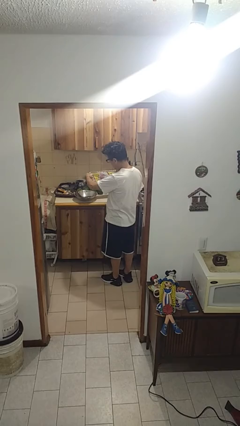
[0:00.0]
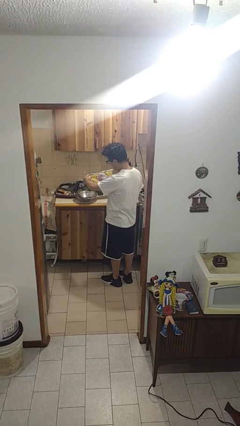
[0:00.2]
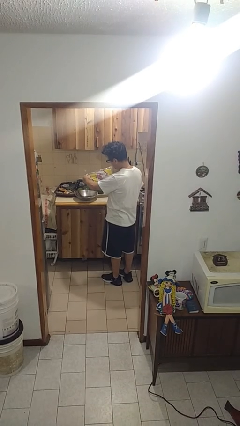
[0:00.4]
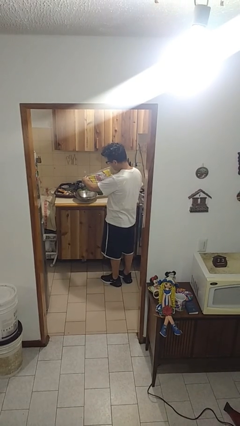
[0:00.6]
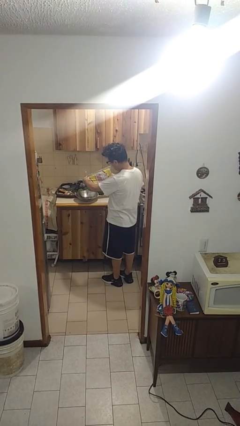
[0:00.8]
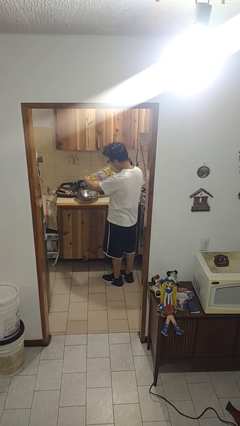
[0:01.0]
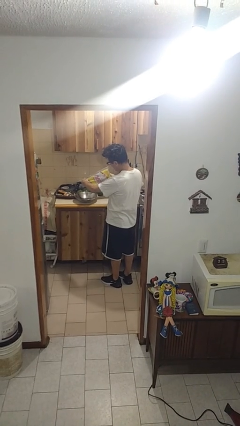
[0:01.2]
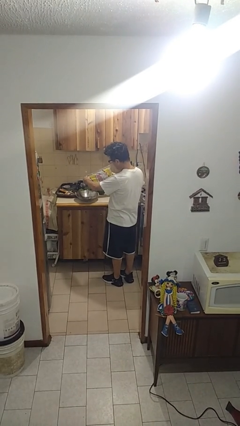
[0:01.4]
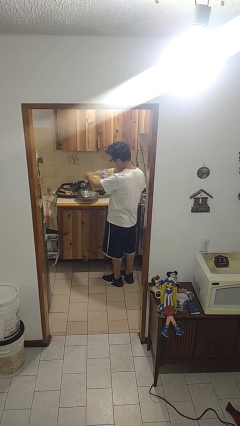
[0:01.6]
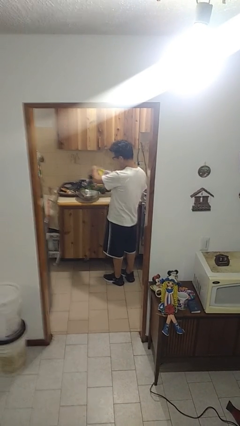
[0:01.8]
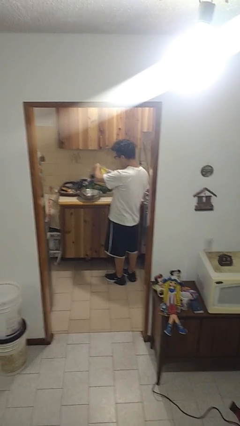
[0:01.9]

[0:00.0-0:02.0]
person pours into bowl

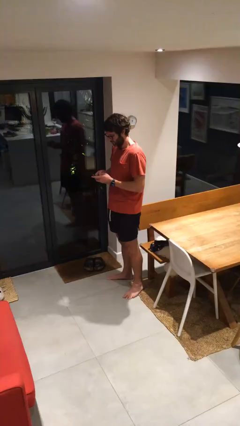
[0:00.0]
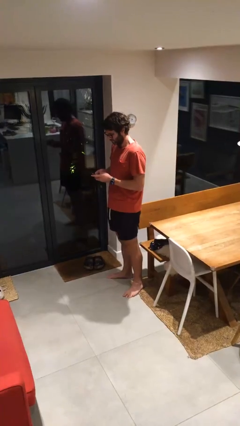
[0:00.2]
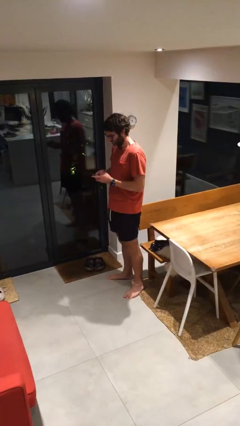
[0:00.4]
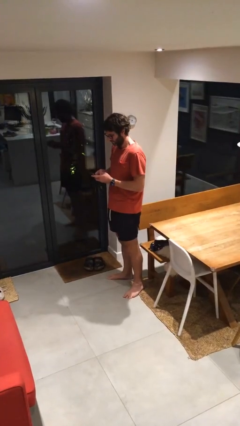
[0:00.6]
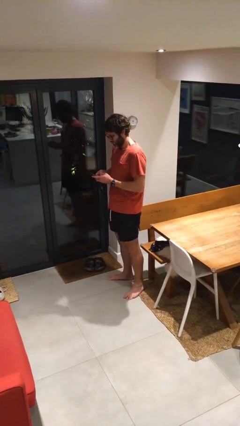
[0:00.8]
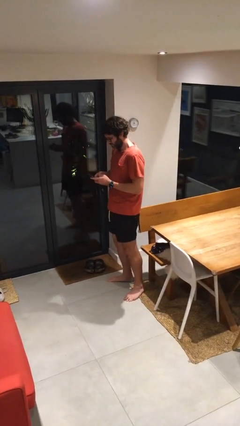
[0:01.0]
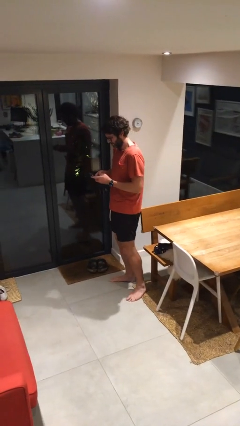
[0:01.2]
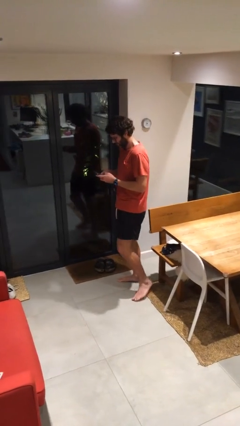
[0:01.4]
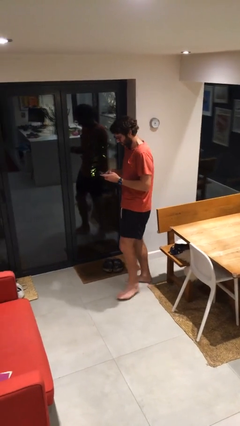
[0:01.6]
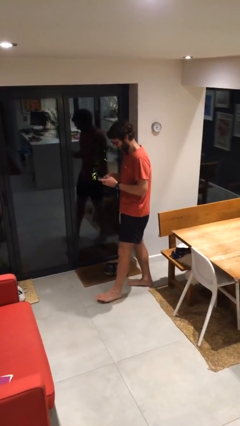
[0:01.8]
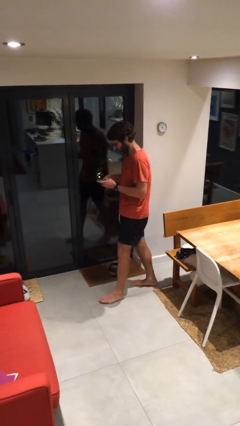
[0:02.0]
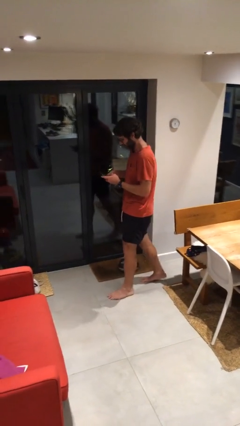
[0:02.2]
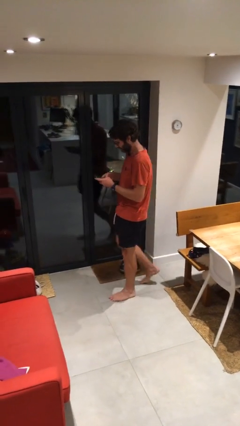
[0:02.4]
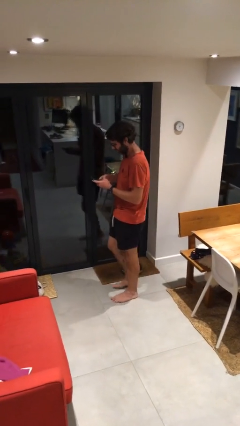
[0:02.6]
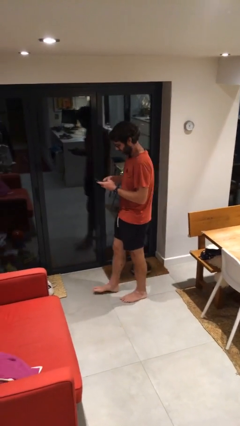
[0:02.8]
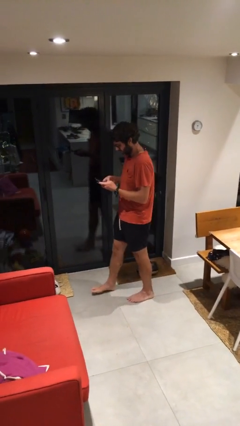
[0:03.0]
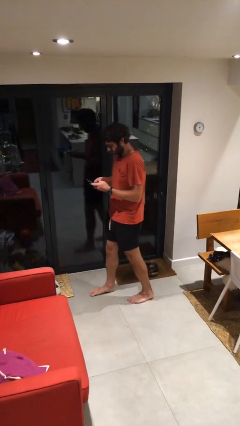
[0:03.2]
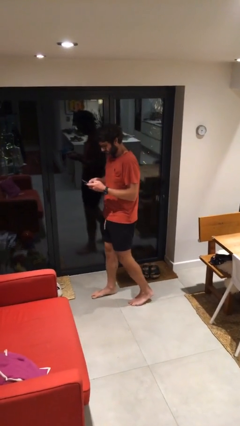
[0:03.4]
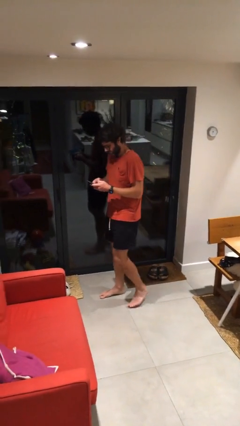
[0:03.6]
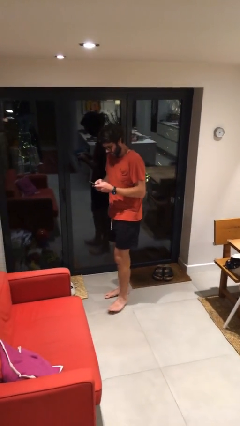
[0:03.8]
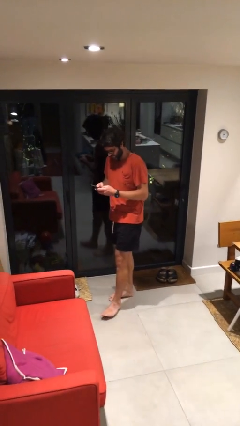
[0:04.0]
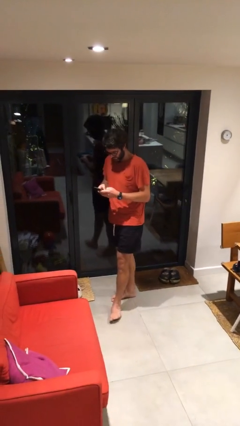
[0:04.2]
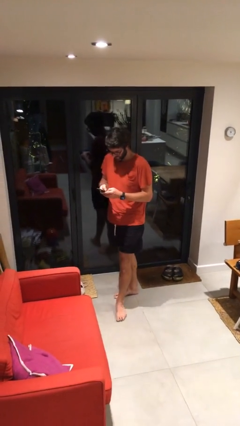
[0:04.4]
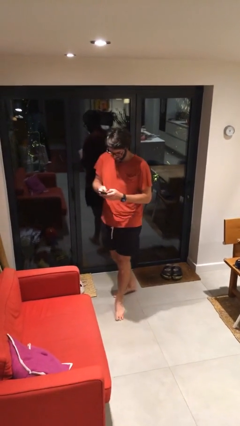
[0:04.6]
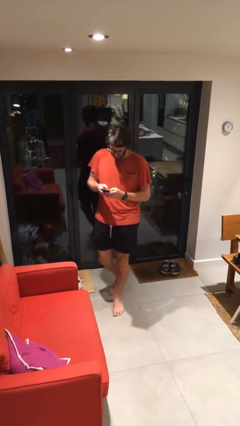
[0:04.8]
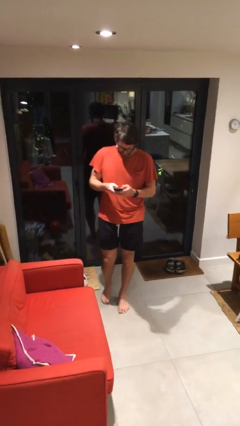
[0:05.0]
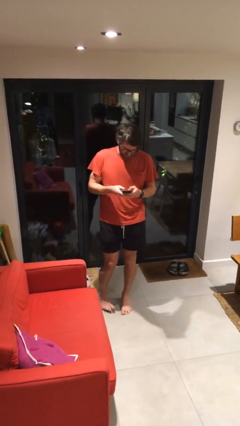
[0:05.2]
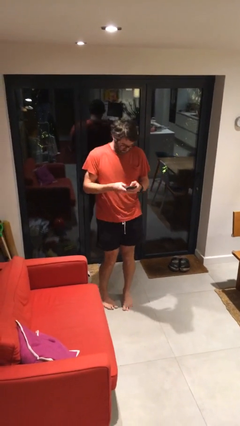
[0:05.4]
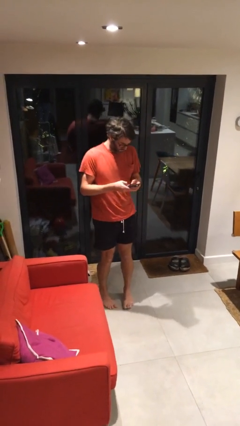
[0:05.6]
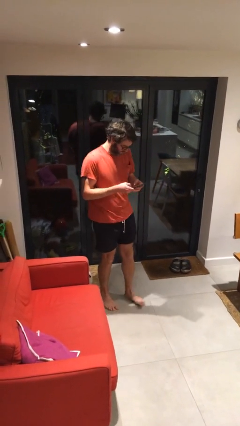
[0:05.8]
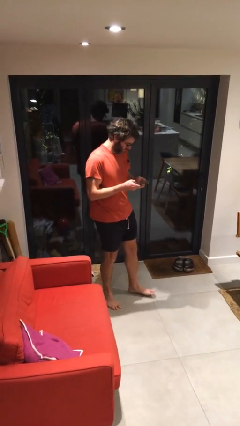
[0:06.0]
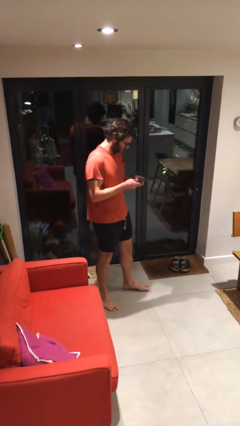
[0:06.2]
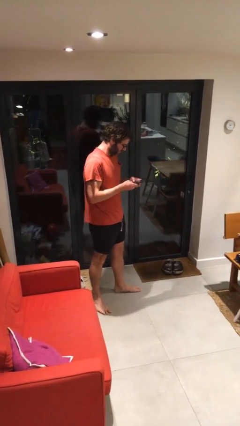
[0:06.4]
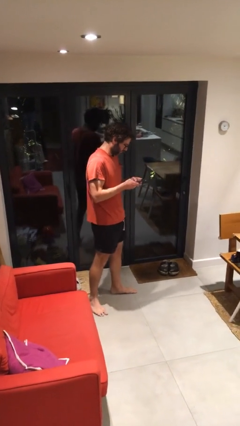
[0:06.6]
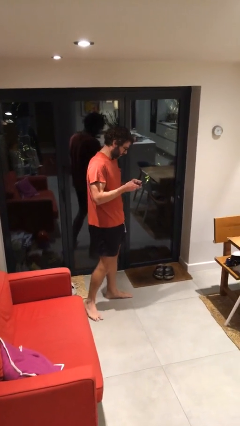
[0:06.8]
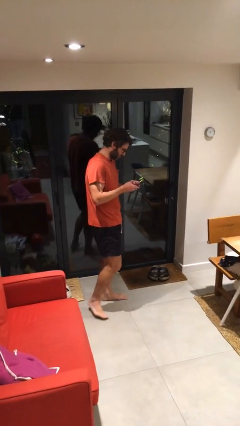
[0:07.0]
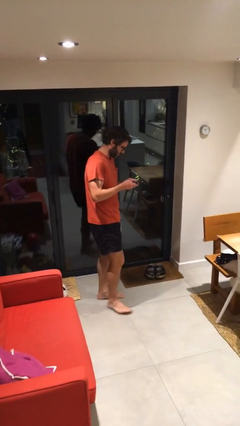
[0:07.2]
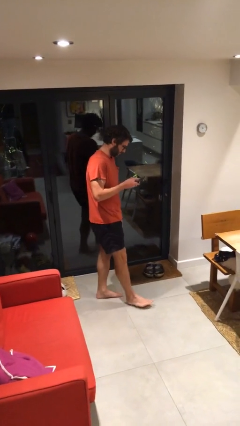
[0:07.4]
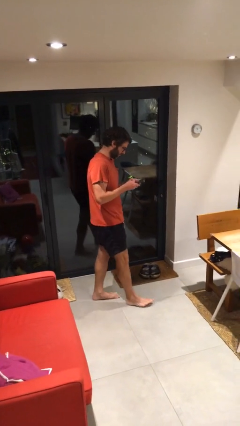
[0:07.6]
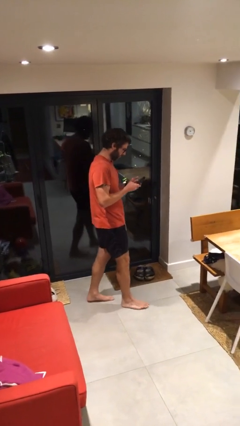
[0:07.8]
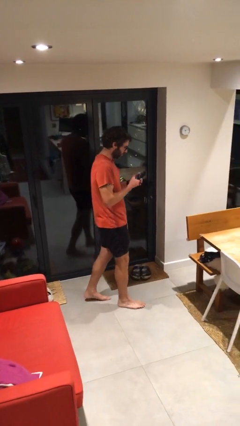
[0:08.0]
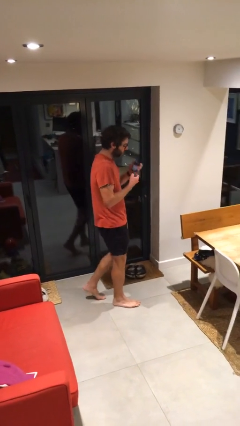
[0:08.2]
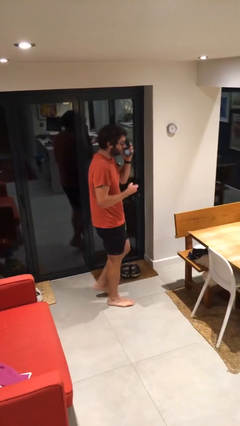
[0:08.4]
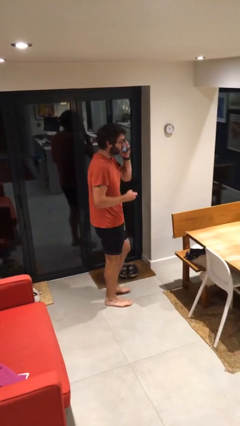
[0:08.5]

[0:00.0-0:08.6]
person texts on phone

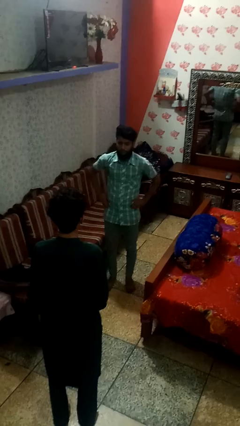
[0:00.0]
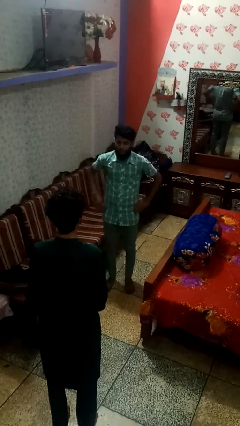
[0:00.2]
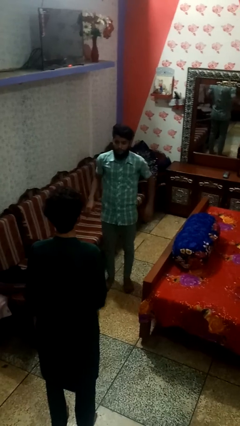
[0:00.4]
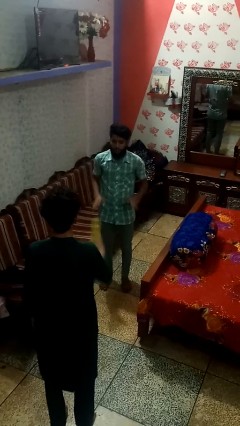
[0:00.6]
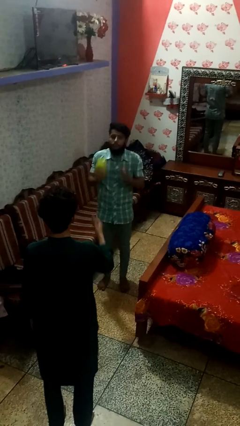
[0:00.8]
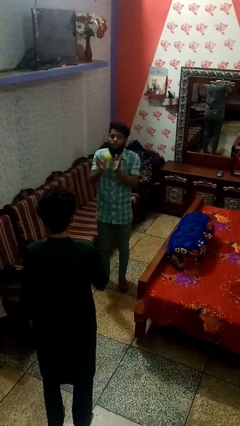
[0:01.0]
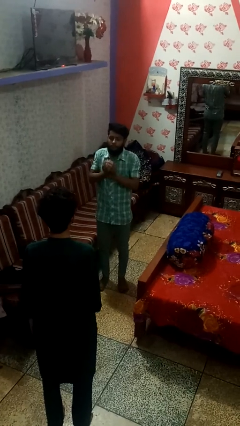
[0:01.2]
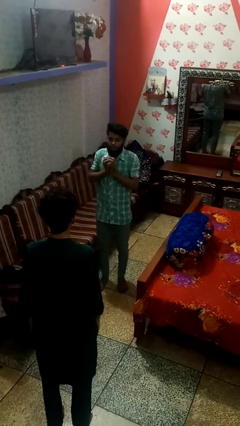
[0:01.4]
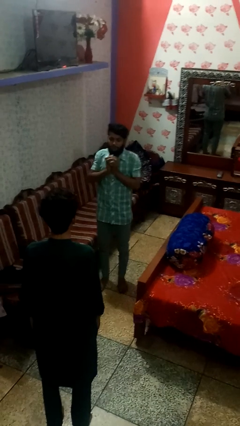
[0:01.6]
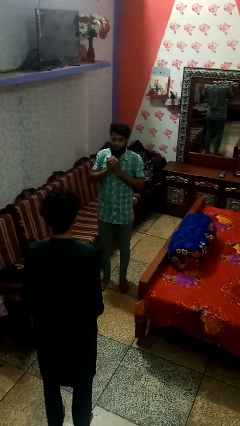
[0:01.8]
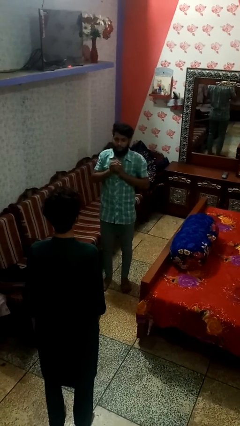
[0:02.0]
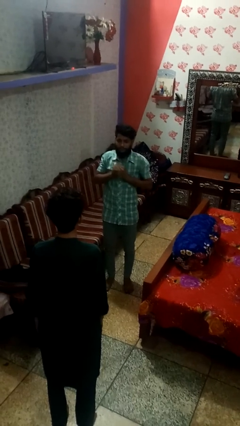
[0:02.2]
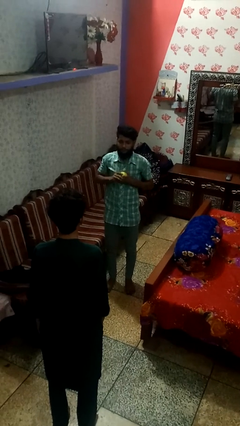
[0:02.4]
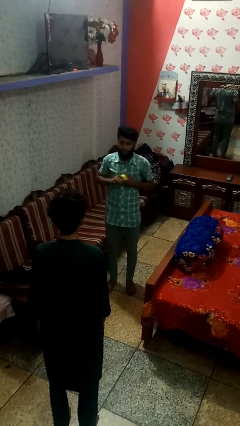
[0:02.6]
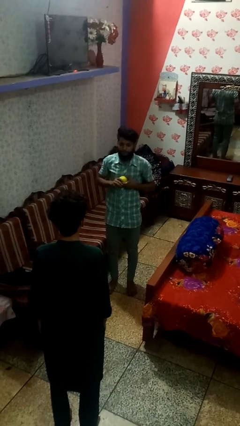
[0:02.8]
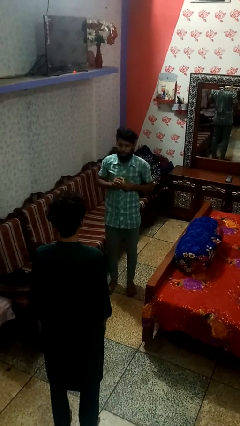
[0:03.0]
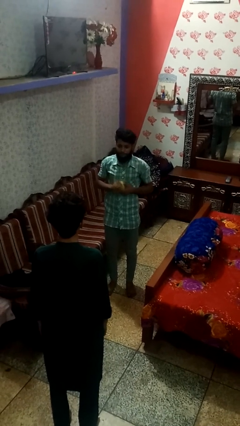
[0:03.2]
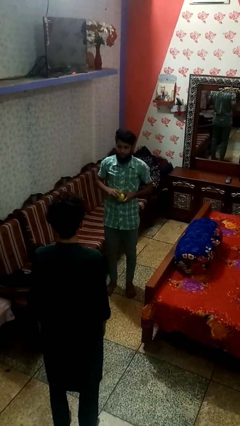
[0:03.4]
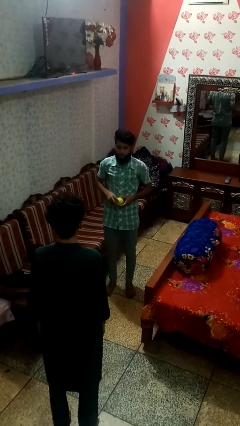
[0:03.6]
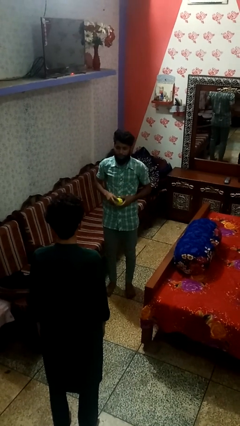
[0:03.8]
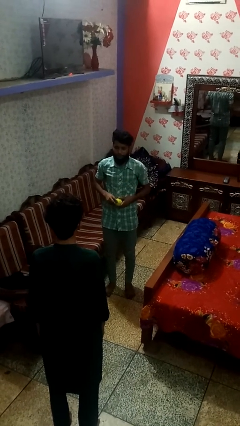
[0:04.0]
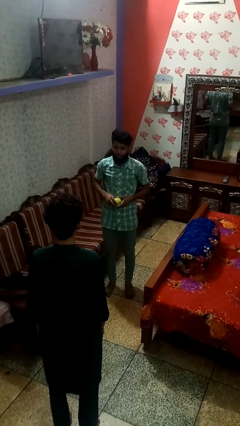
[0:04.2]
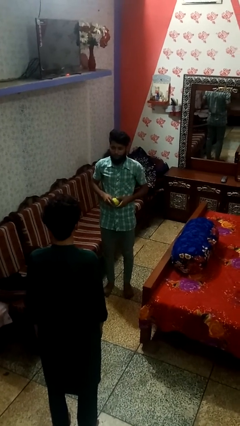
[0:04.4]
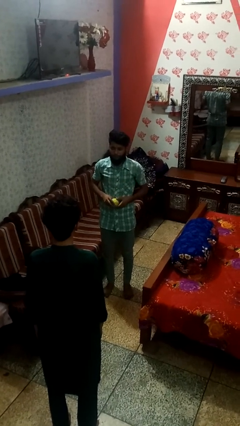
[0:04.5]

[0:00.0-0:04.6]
person catches object from person

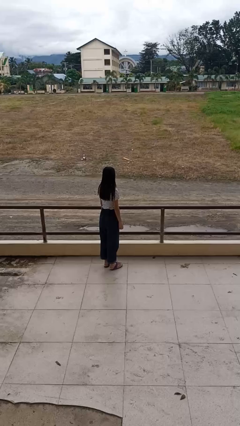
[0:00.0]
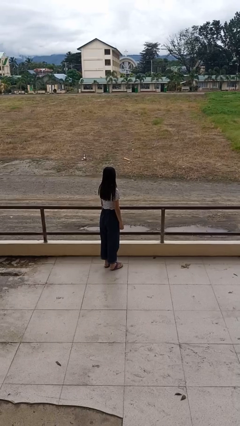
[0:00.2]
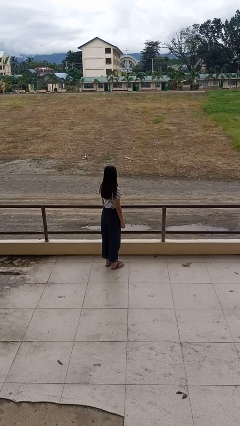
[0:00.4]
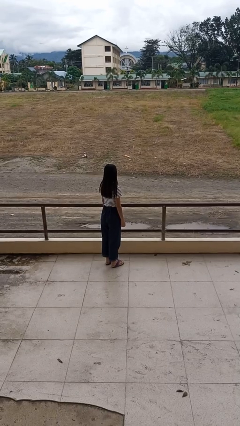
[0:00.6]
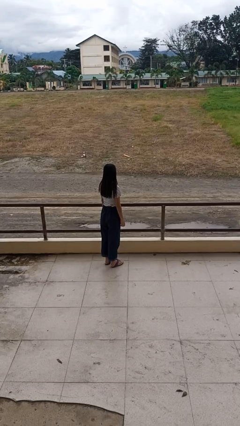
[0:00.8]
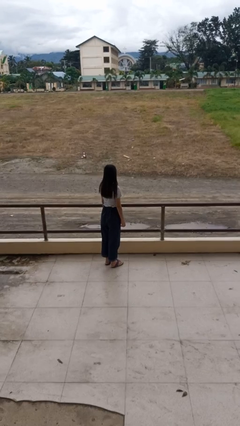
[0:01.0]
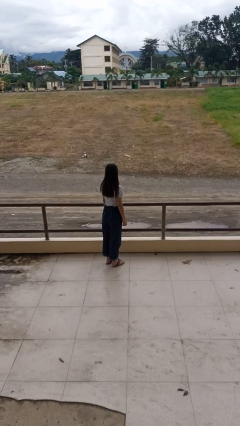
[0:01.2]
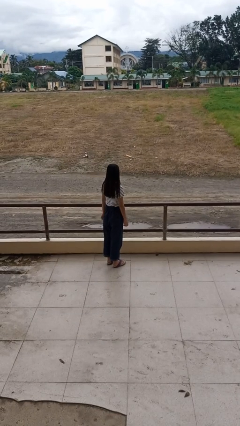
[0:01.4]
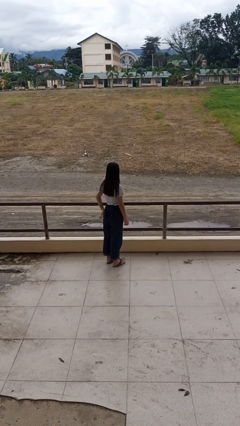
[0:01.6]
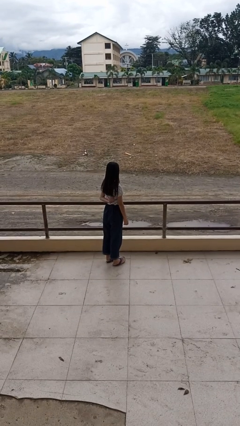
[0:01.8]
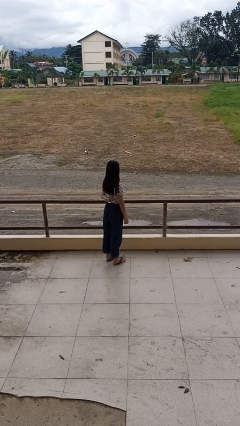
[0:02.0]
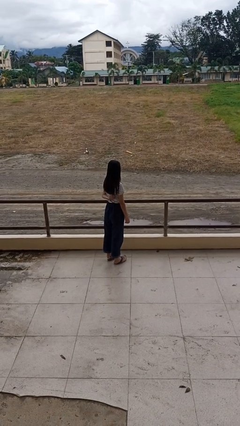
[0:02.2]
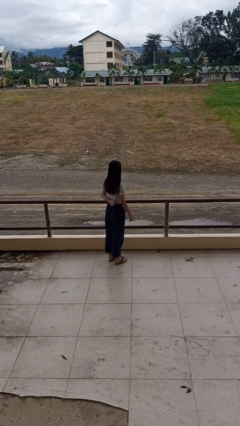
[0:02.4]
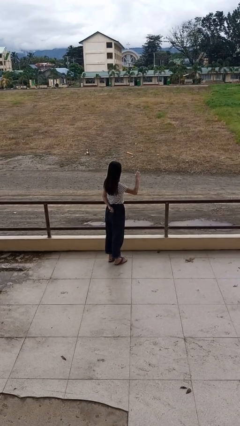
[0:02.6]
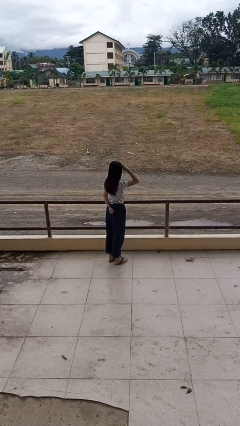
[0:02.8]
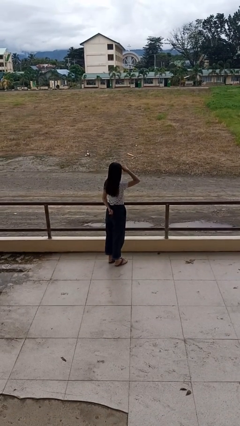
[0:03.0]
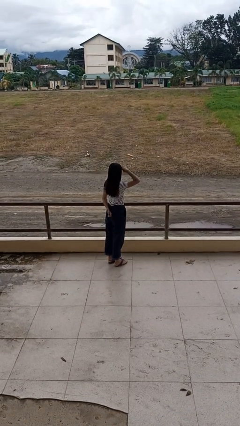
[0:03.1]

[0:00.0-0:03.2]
person salutes
